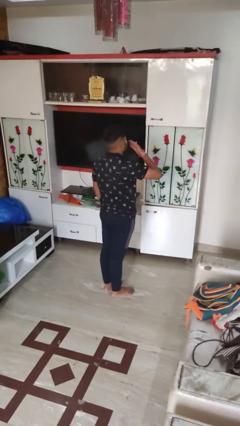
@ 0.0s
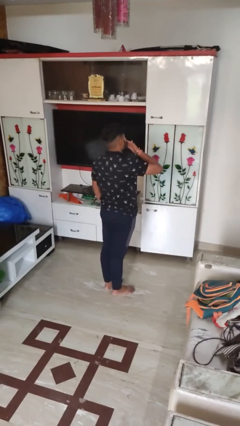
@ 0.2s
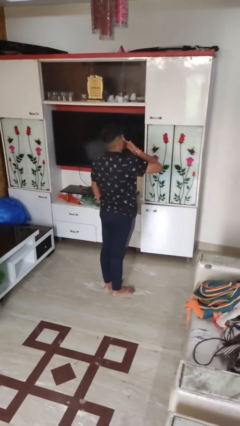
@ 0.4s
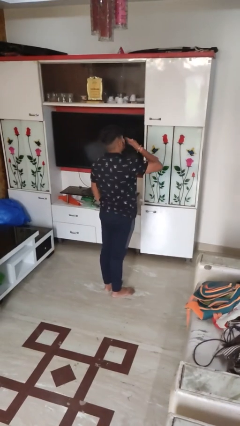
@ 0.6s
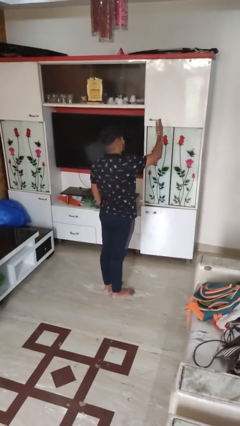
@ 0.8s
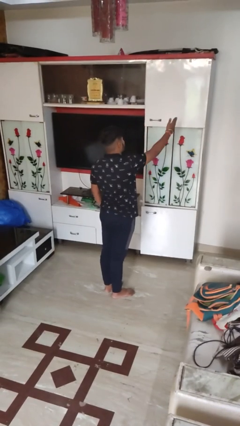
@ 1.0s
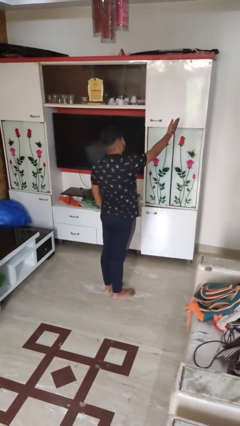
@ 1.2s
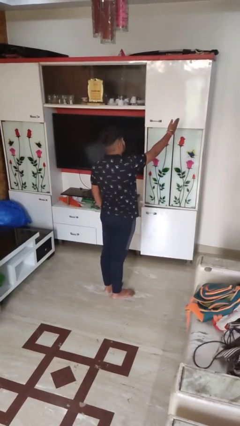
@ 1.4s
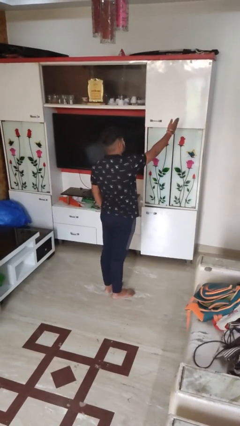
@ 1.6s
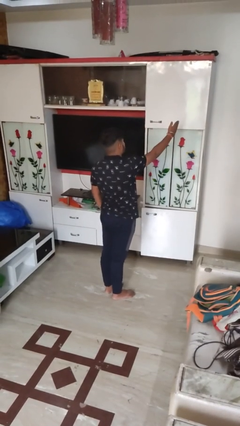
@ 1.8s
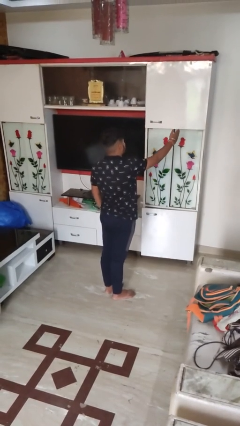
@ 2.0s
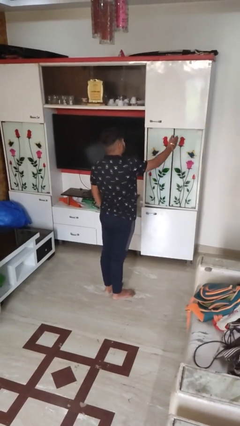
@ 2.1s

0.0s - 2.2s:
person gestures blow kiss

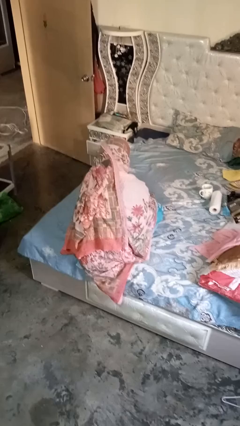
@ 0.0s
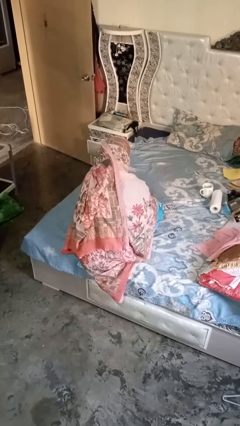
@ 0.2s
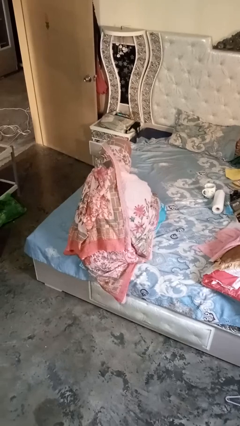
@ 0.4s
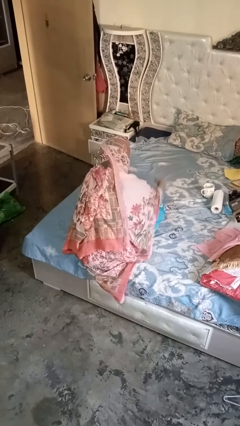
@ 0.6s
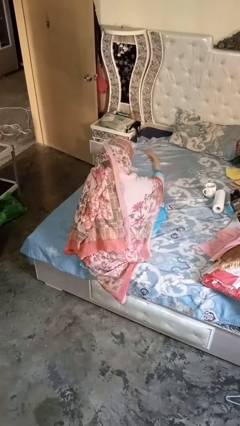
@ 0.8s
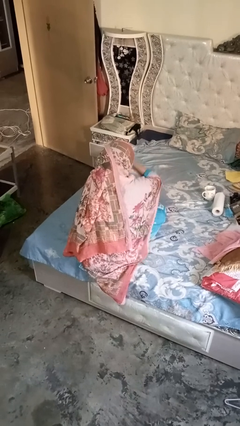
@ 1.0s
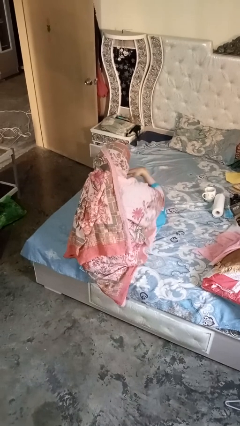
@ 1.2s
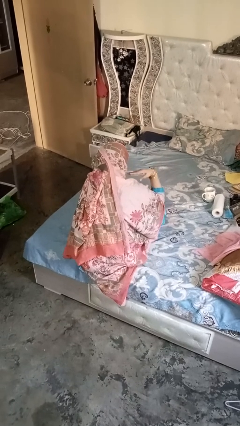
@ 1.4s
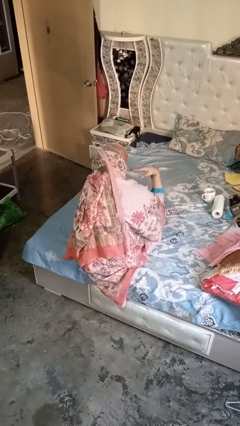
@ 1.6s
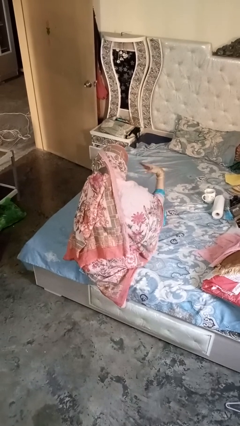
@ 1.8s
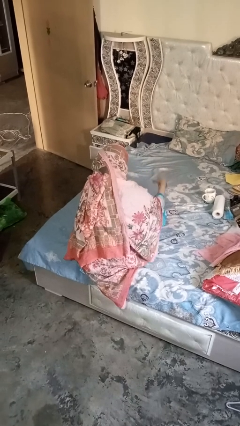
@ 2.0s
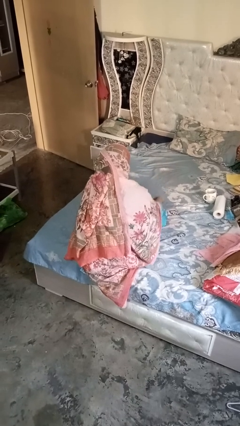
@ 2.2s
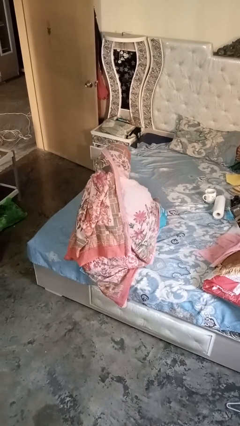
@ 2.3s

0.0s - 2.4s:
person gestures cut

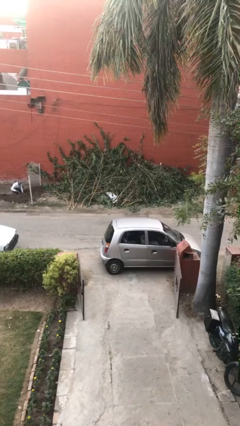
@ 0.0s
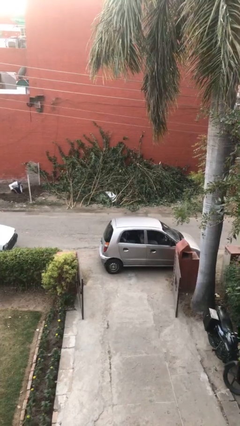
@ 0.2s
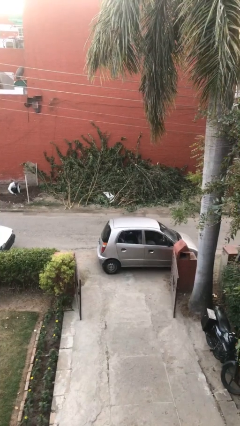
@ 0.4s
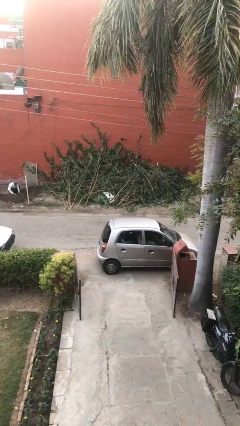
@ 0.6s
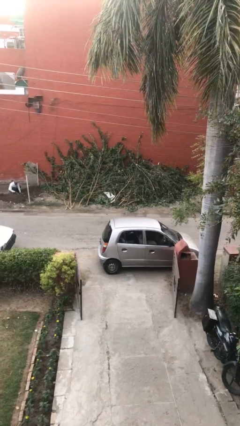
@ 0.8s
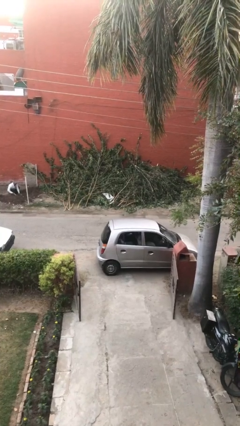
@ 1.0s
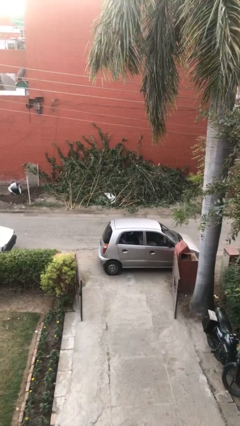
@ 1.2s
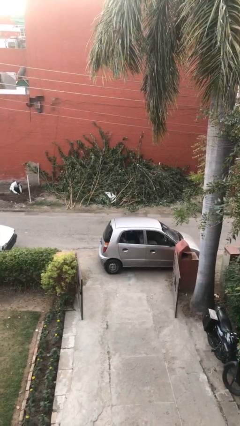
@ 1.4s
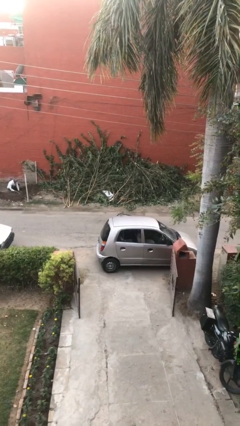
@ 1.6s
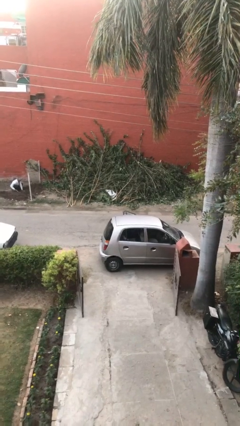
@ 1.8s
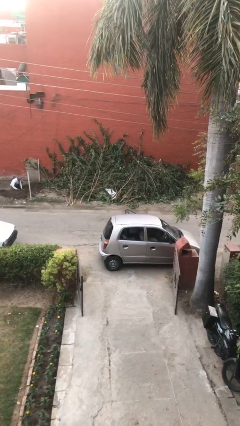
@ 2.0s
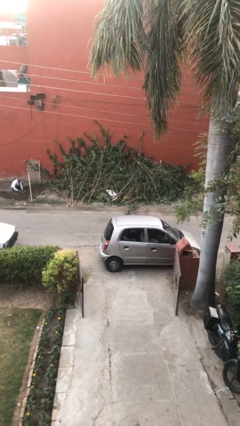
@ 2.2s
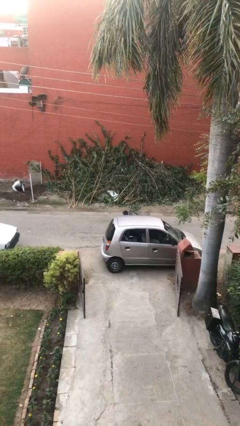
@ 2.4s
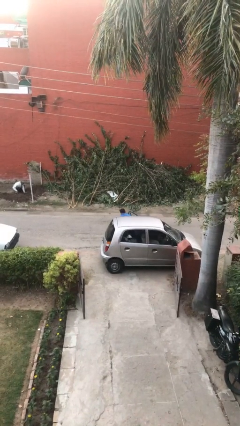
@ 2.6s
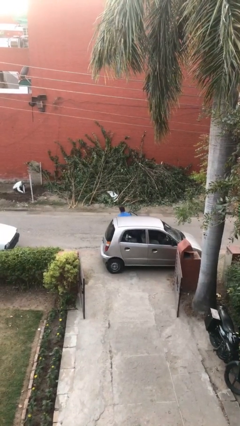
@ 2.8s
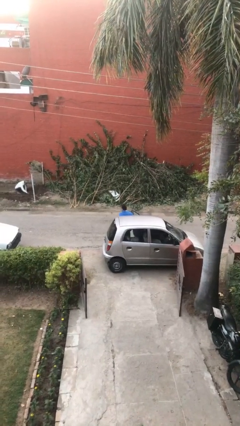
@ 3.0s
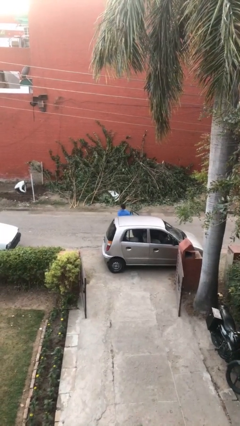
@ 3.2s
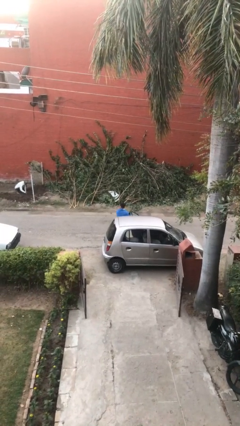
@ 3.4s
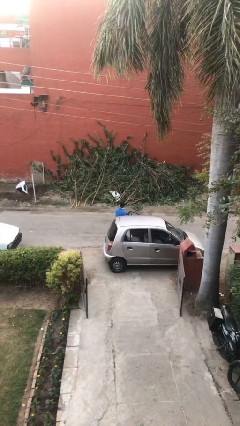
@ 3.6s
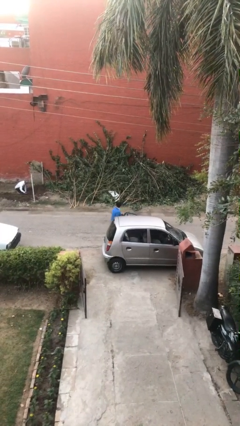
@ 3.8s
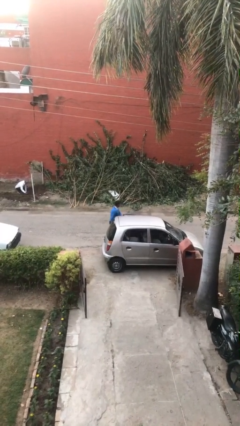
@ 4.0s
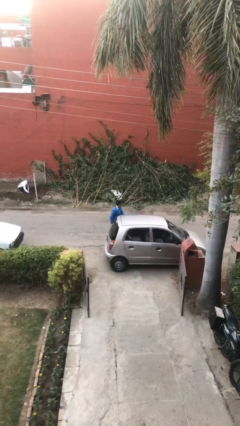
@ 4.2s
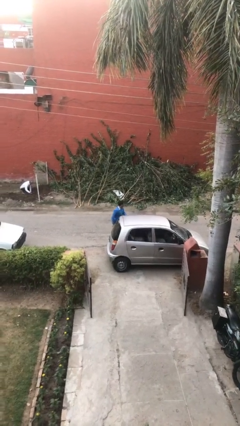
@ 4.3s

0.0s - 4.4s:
person exits car

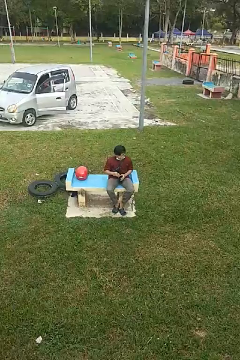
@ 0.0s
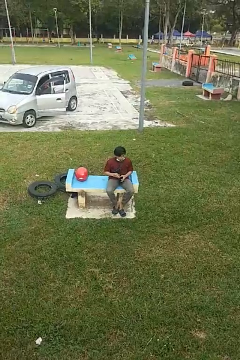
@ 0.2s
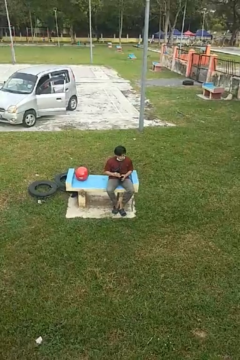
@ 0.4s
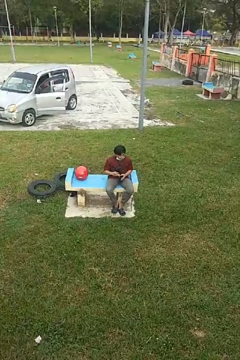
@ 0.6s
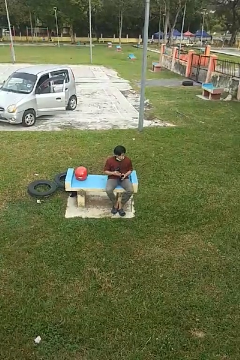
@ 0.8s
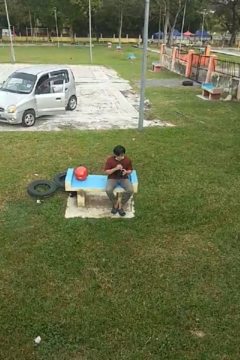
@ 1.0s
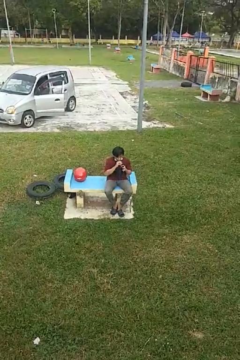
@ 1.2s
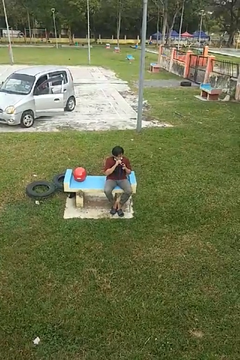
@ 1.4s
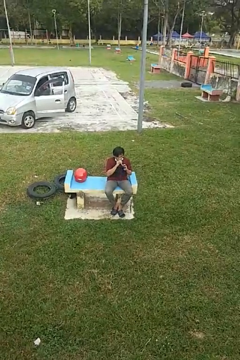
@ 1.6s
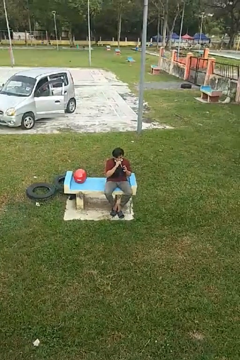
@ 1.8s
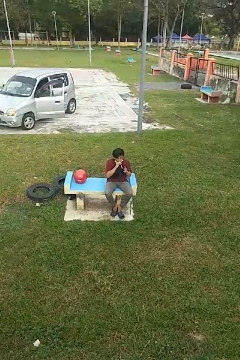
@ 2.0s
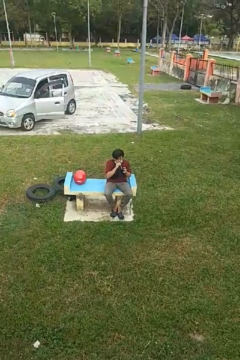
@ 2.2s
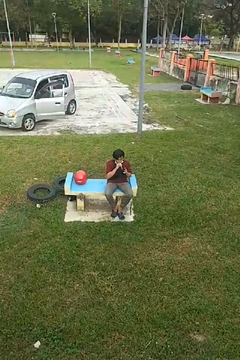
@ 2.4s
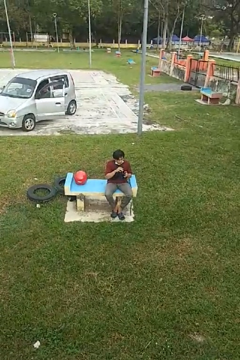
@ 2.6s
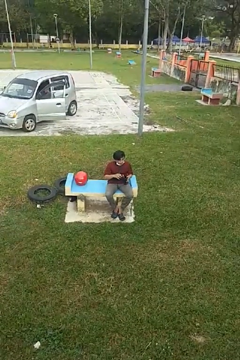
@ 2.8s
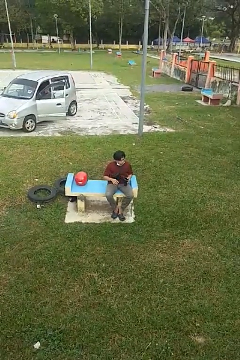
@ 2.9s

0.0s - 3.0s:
person drinks from straw

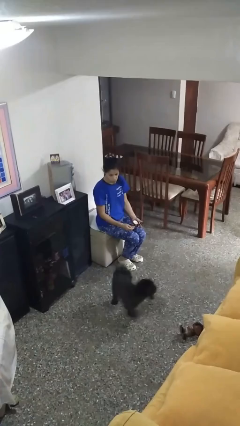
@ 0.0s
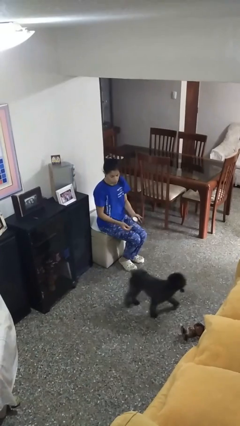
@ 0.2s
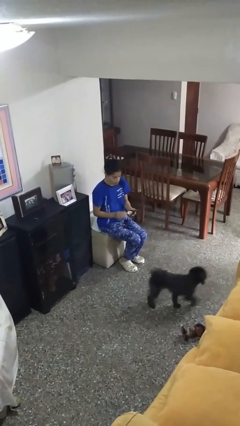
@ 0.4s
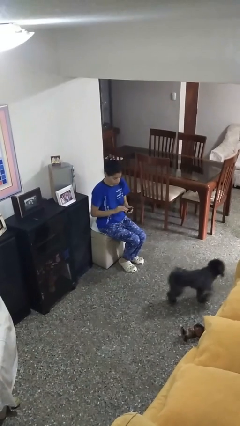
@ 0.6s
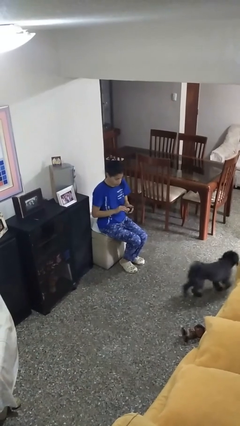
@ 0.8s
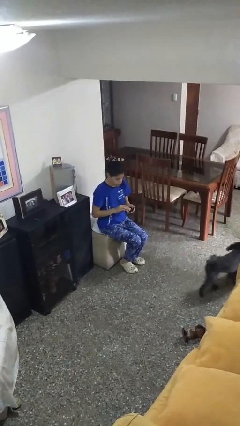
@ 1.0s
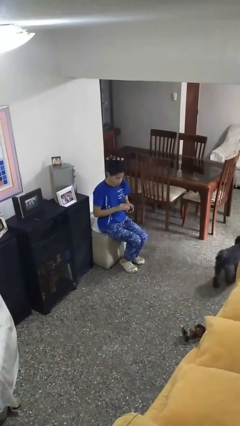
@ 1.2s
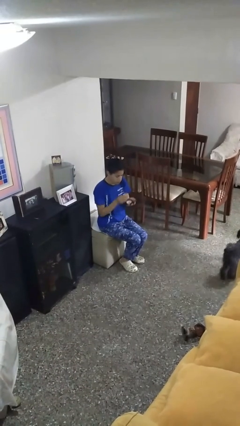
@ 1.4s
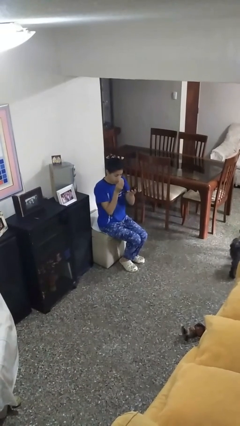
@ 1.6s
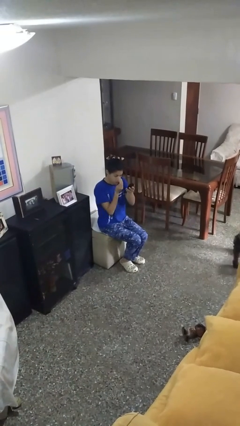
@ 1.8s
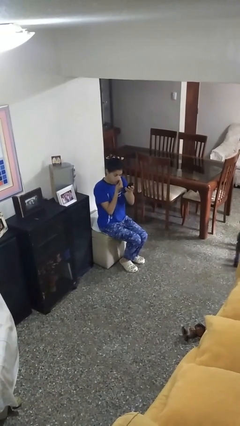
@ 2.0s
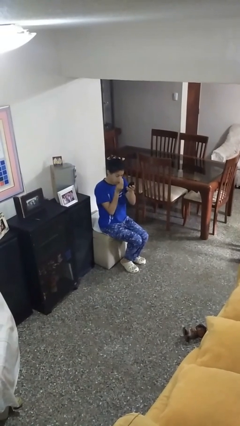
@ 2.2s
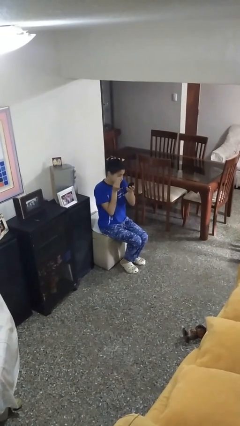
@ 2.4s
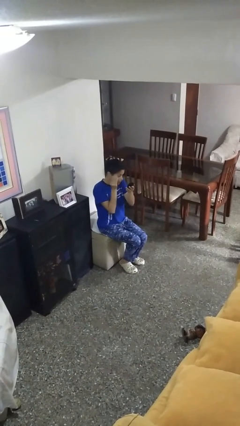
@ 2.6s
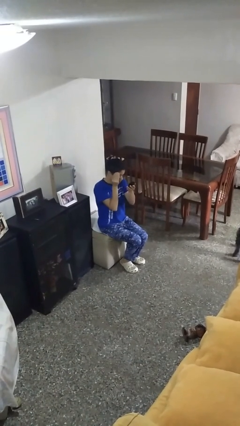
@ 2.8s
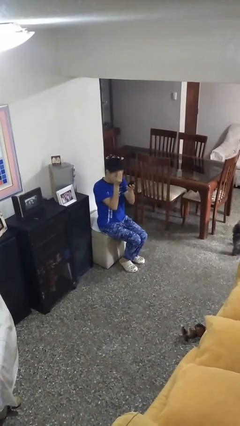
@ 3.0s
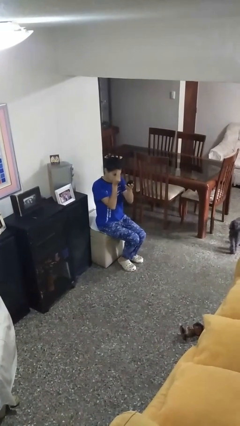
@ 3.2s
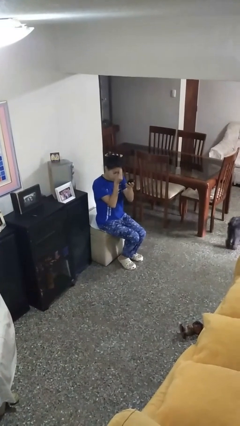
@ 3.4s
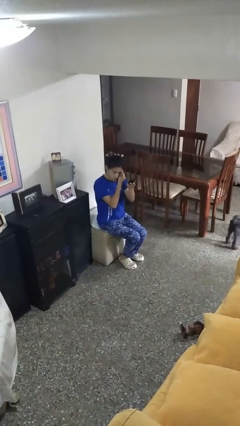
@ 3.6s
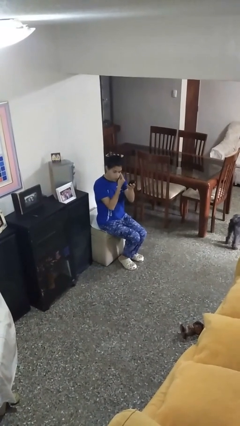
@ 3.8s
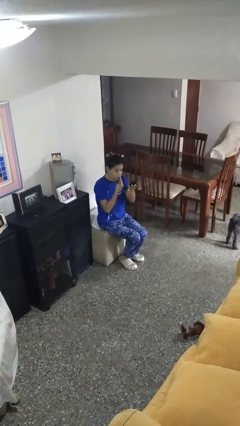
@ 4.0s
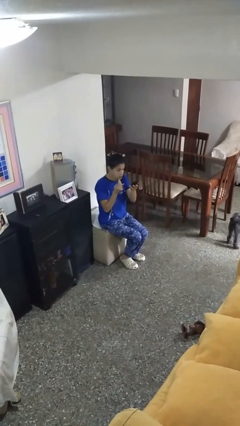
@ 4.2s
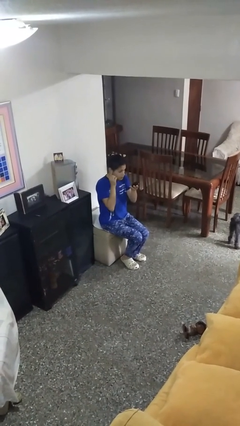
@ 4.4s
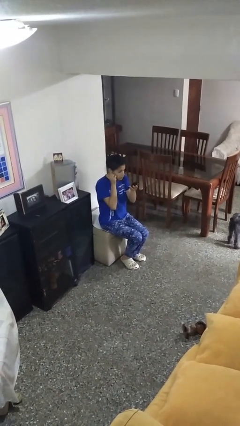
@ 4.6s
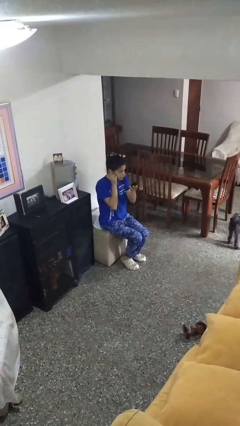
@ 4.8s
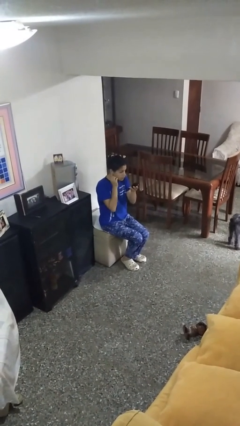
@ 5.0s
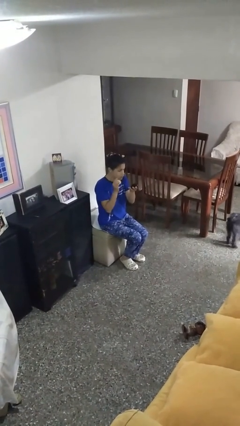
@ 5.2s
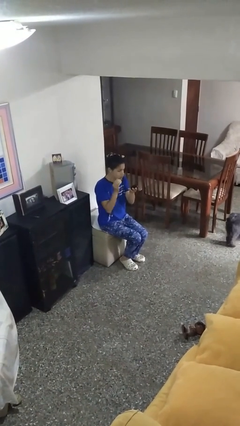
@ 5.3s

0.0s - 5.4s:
person applies foundation makeup

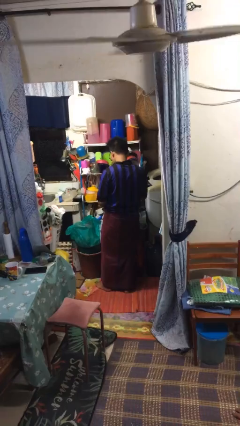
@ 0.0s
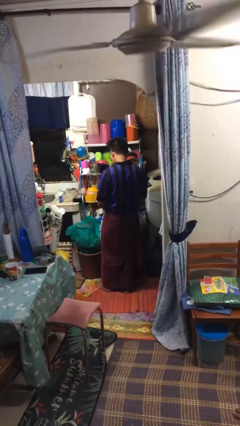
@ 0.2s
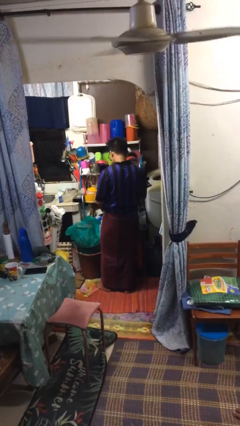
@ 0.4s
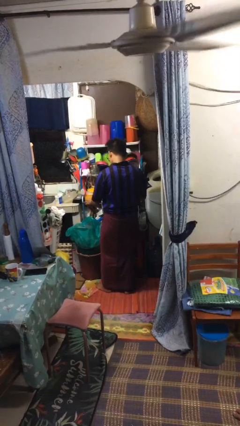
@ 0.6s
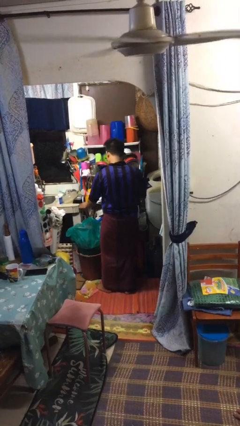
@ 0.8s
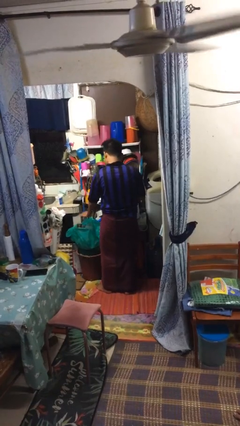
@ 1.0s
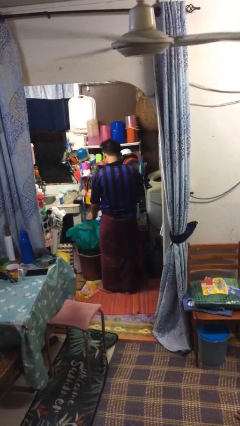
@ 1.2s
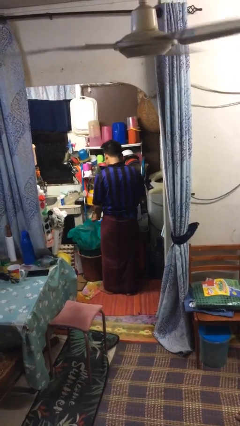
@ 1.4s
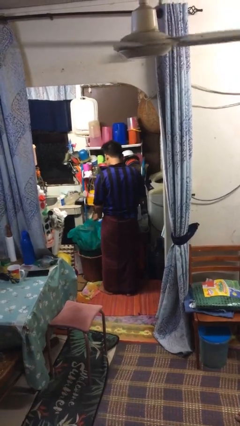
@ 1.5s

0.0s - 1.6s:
person discards trash
